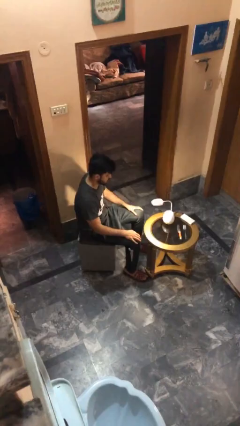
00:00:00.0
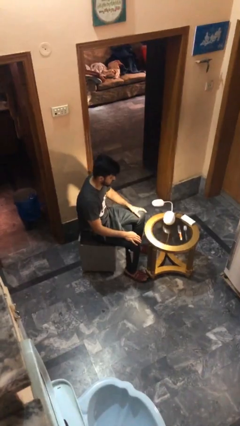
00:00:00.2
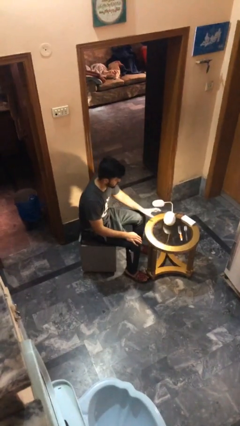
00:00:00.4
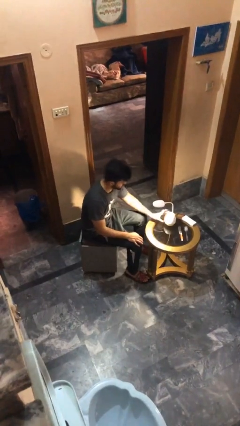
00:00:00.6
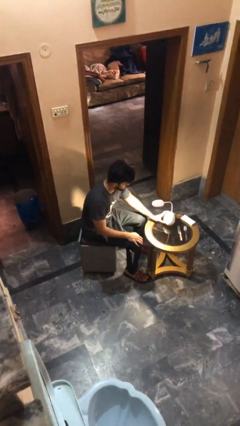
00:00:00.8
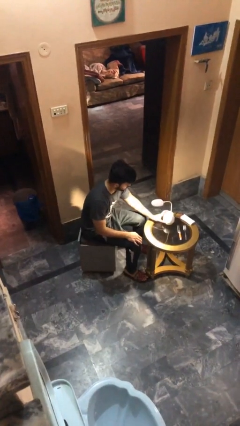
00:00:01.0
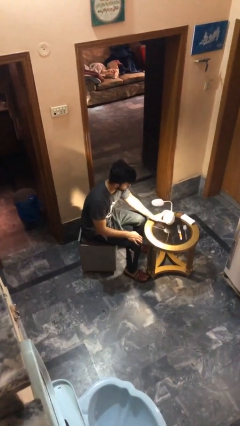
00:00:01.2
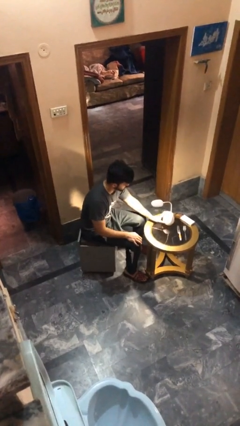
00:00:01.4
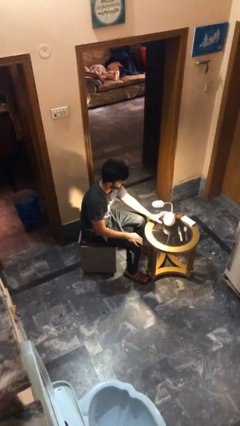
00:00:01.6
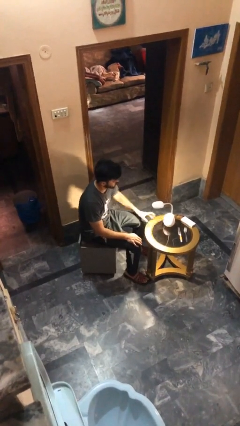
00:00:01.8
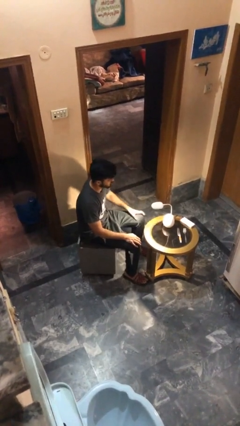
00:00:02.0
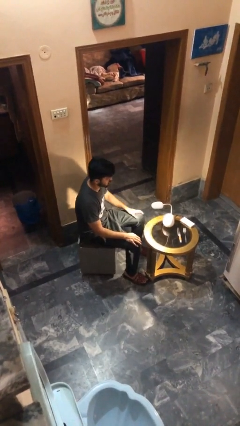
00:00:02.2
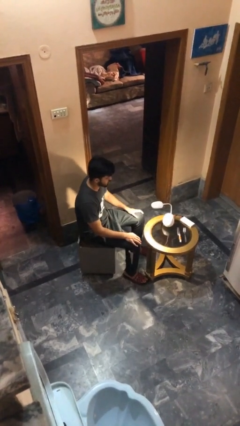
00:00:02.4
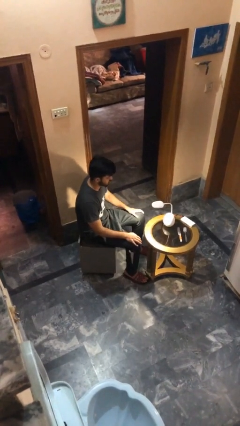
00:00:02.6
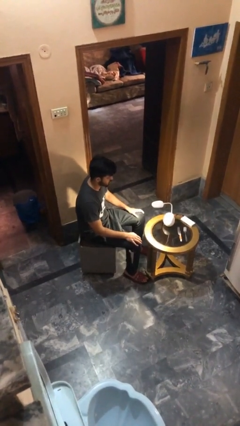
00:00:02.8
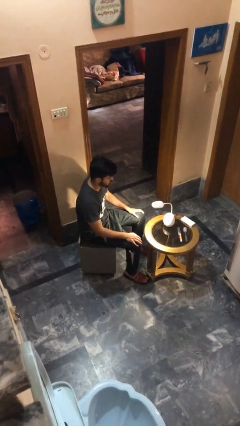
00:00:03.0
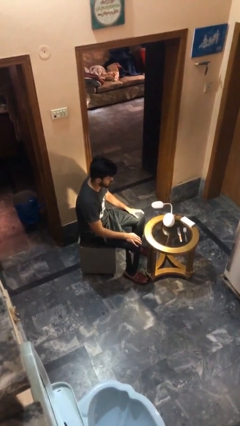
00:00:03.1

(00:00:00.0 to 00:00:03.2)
person turns off lamp

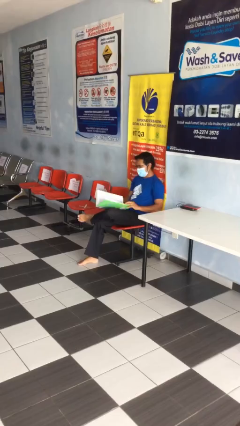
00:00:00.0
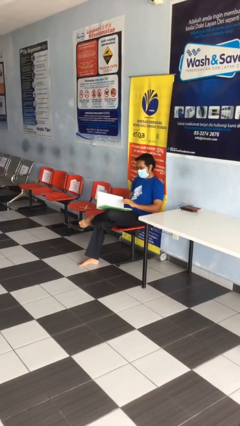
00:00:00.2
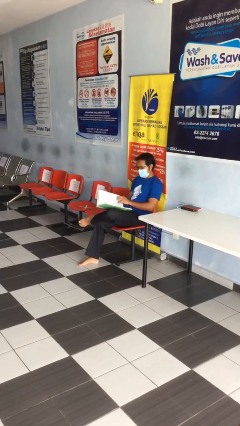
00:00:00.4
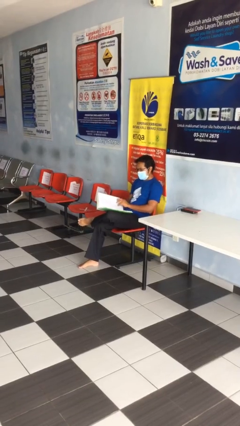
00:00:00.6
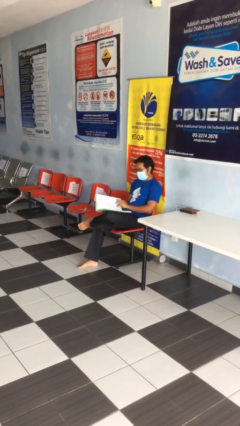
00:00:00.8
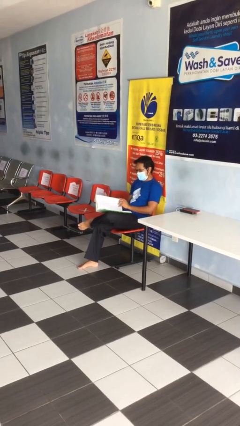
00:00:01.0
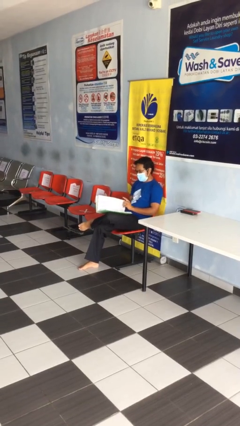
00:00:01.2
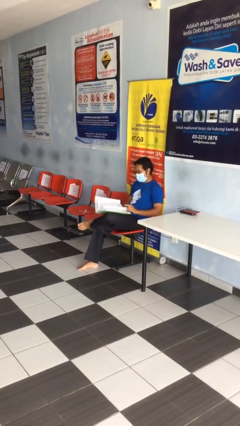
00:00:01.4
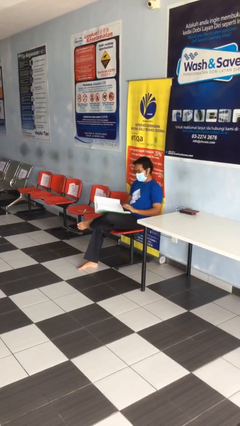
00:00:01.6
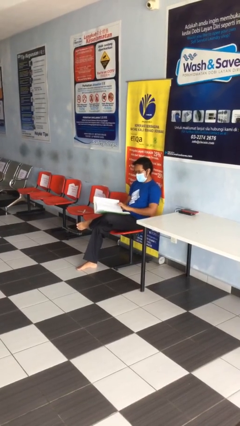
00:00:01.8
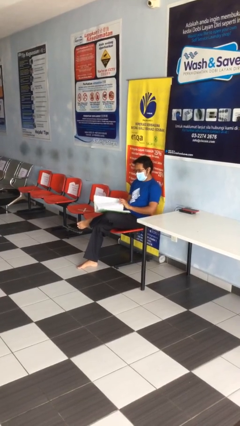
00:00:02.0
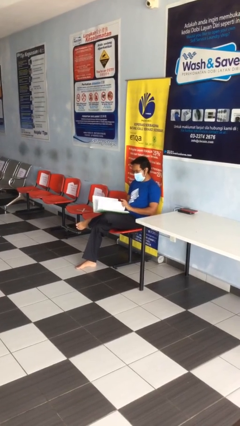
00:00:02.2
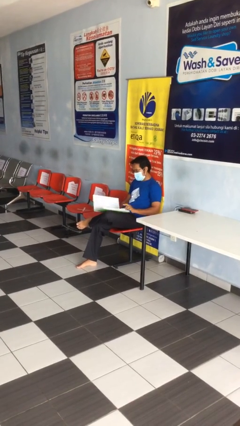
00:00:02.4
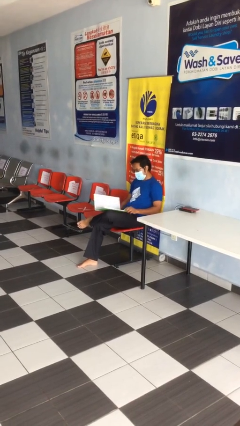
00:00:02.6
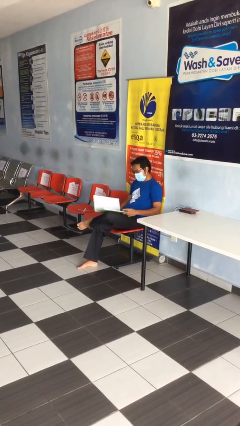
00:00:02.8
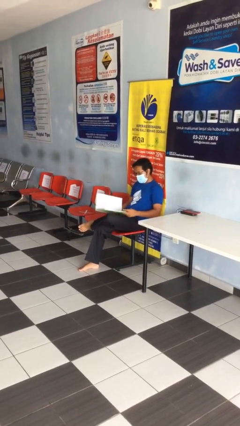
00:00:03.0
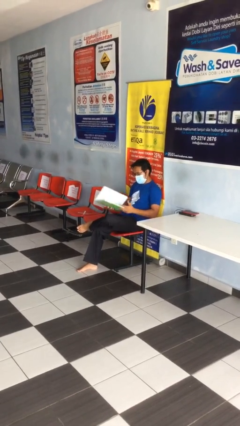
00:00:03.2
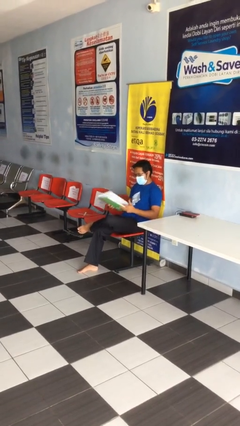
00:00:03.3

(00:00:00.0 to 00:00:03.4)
person reads document

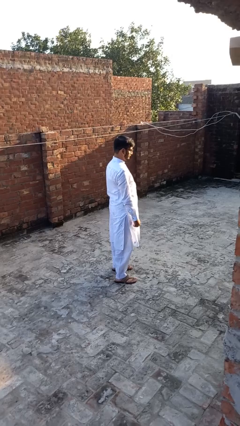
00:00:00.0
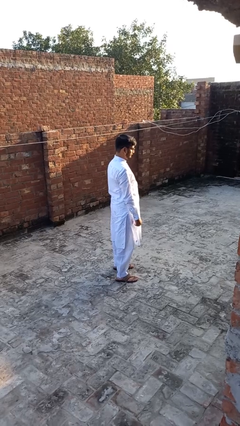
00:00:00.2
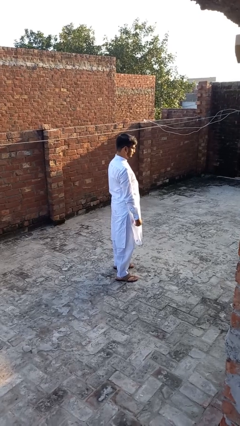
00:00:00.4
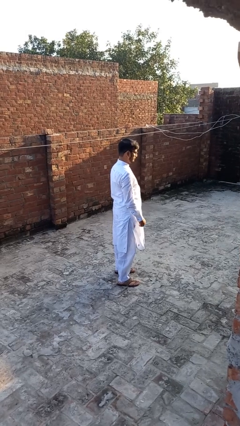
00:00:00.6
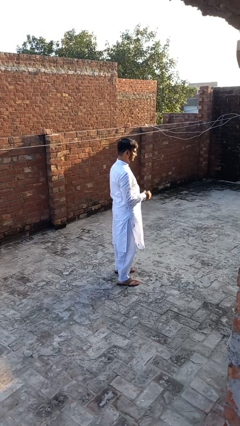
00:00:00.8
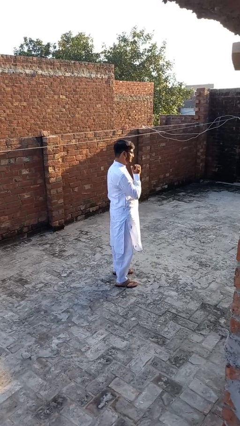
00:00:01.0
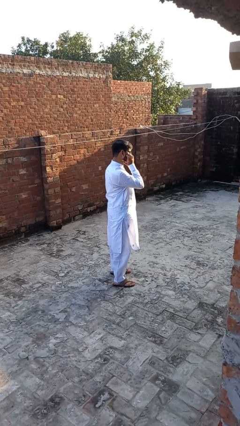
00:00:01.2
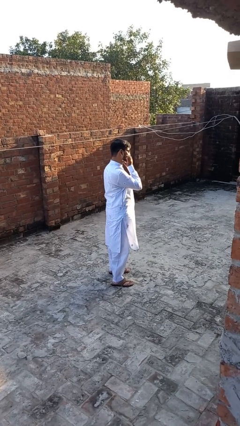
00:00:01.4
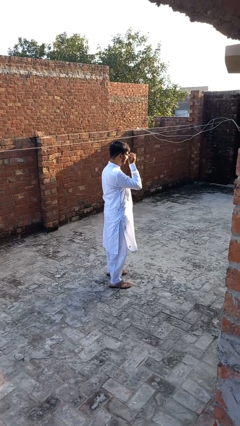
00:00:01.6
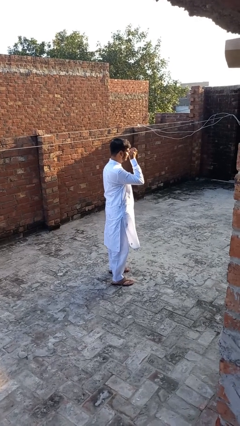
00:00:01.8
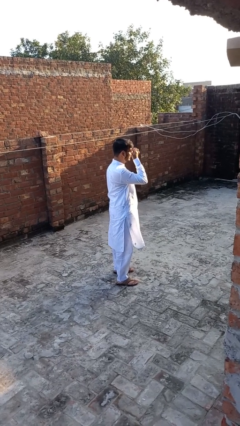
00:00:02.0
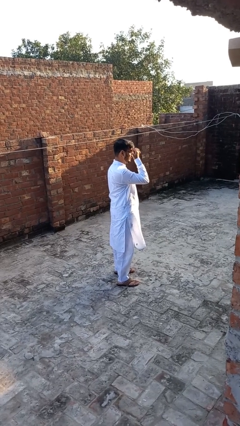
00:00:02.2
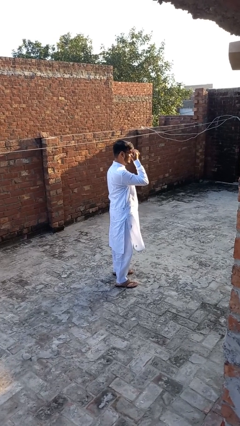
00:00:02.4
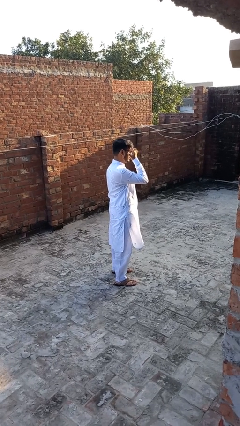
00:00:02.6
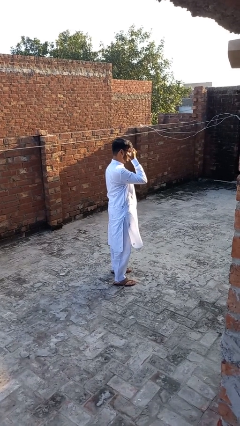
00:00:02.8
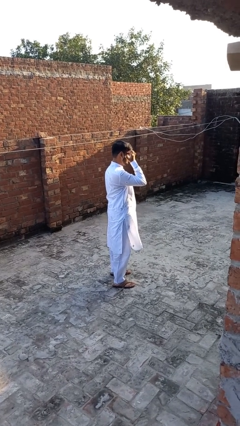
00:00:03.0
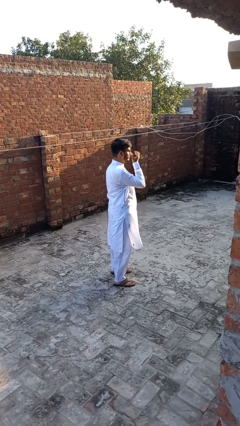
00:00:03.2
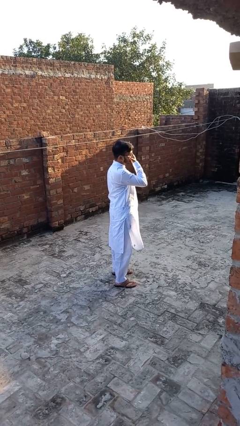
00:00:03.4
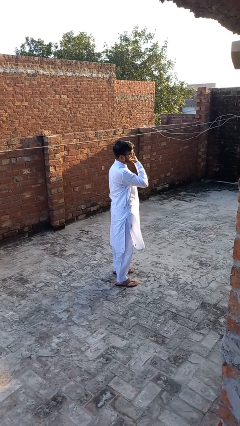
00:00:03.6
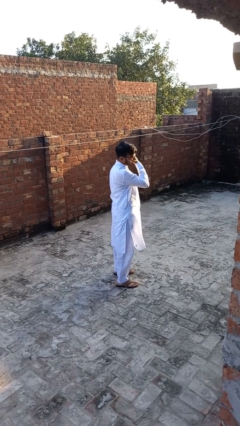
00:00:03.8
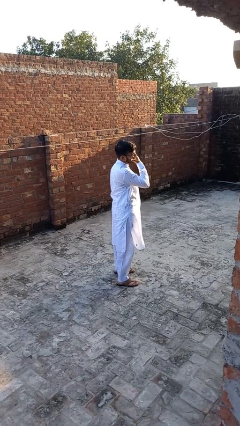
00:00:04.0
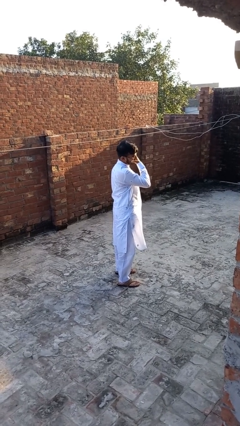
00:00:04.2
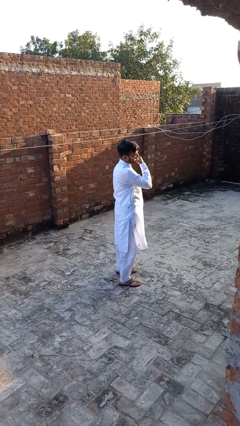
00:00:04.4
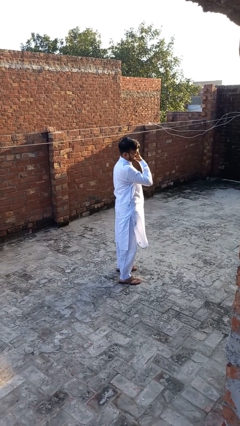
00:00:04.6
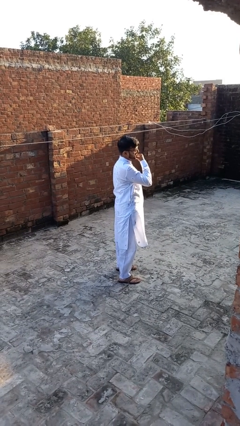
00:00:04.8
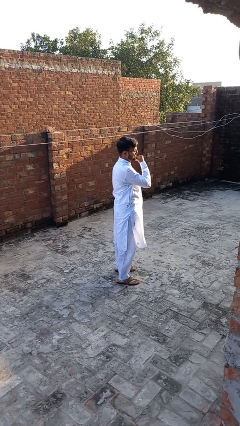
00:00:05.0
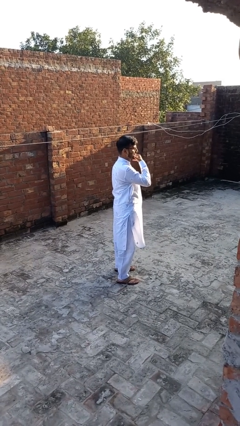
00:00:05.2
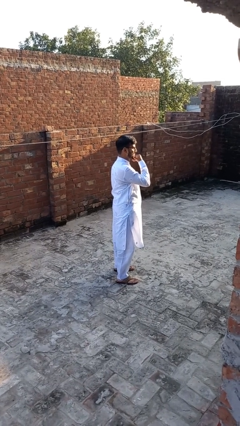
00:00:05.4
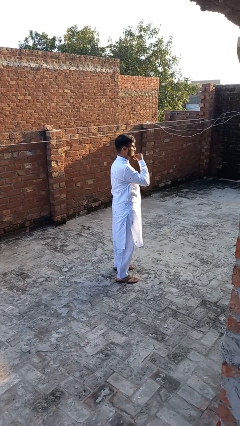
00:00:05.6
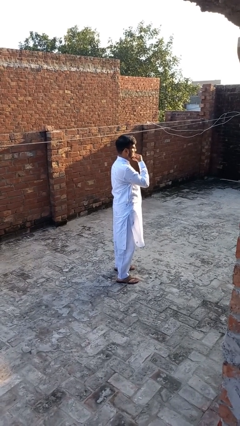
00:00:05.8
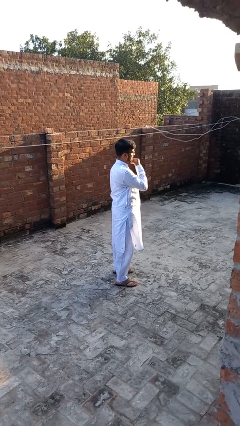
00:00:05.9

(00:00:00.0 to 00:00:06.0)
person scratches face

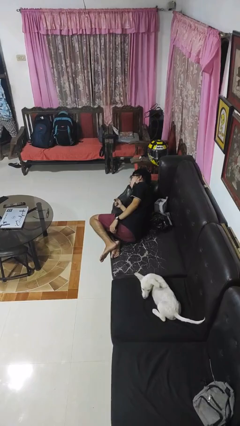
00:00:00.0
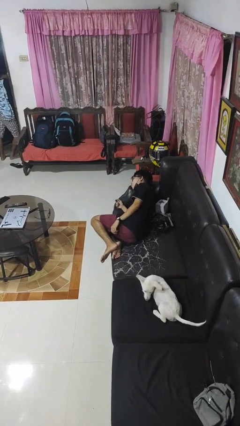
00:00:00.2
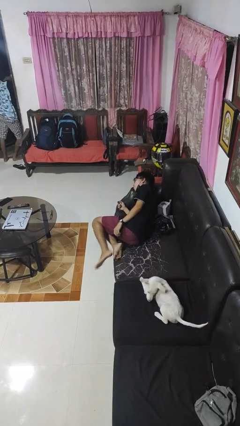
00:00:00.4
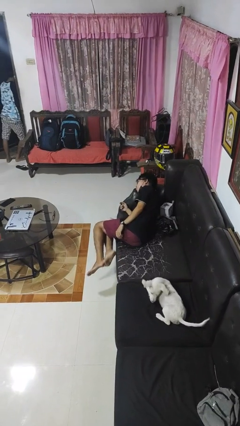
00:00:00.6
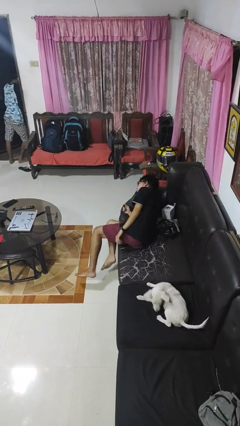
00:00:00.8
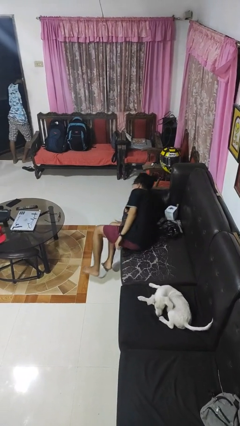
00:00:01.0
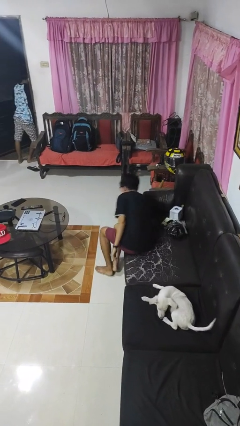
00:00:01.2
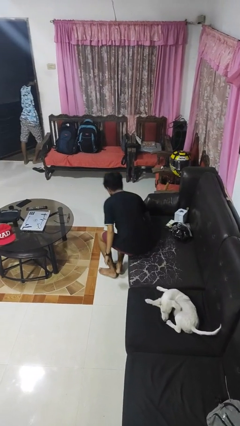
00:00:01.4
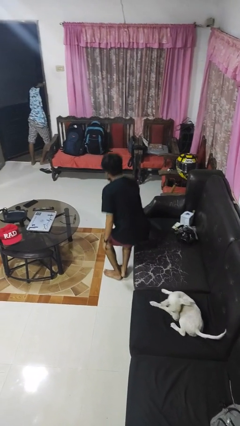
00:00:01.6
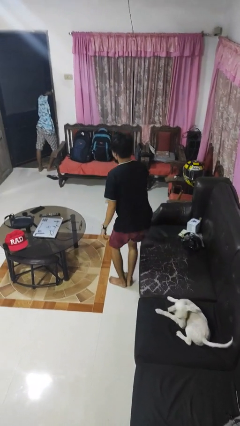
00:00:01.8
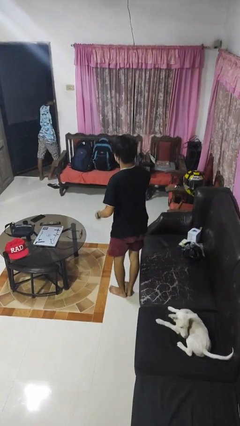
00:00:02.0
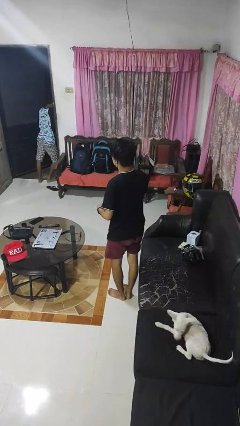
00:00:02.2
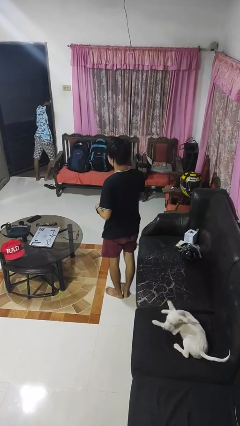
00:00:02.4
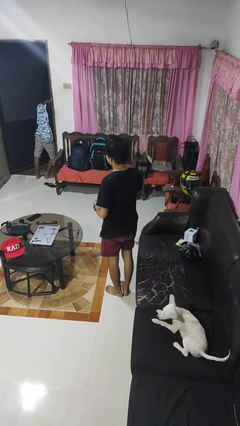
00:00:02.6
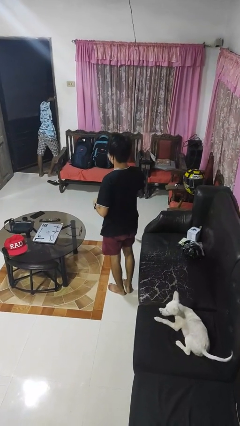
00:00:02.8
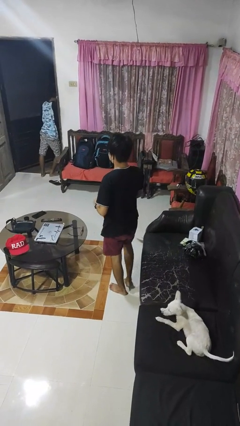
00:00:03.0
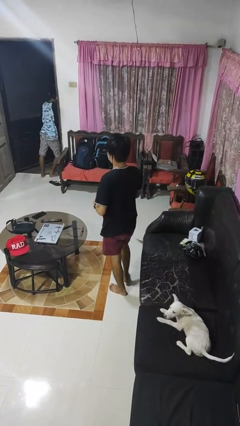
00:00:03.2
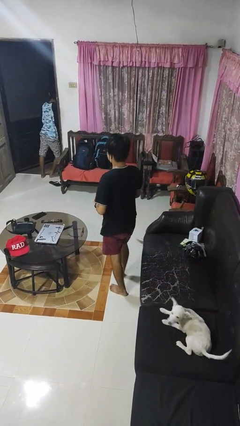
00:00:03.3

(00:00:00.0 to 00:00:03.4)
person stands up

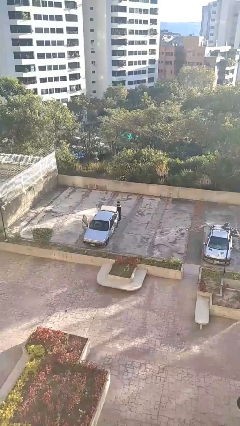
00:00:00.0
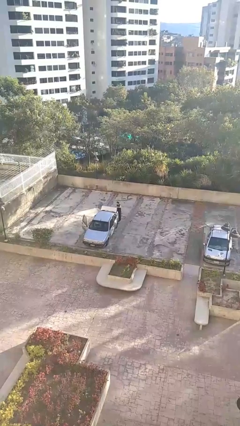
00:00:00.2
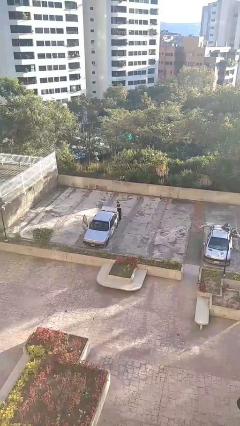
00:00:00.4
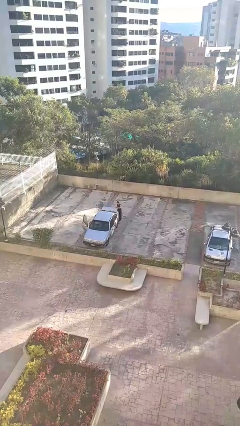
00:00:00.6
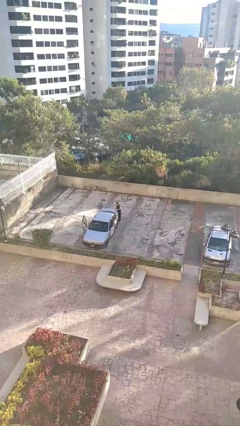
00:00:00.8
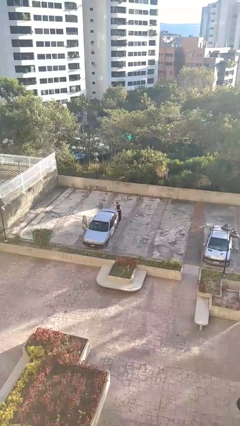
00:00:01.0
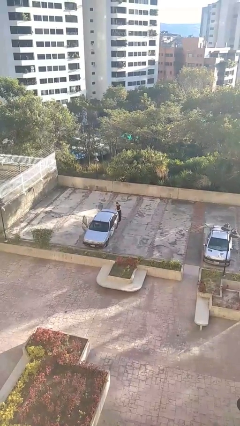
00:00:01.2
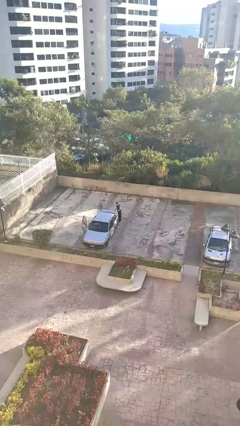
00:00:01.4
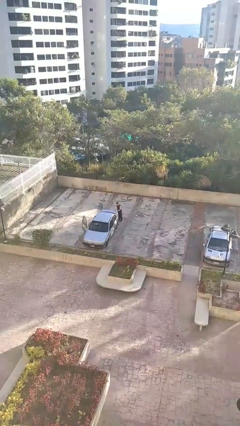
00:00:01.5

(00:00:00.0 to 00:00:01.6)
person closes car trunk
